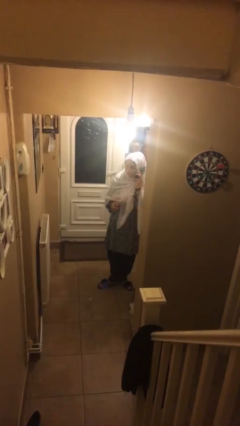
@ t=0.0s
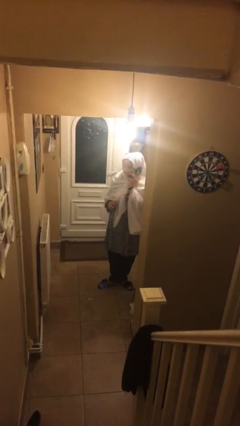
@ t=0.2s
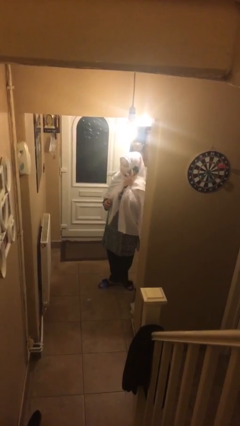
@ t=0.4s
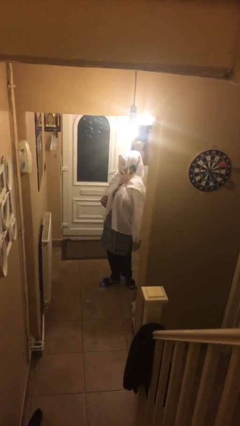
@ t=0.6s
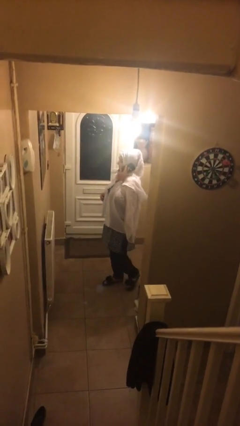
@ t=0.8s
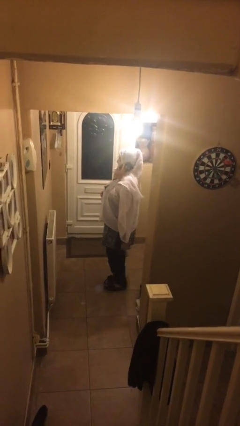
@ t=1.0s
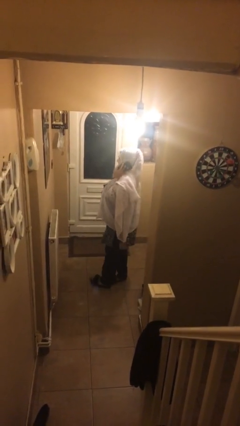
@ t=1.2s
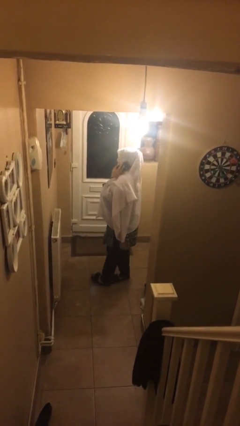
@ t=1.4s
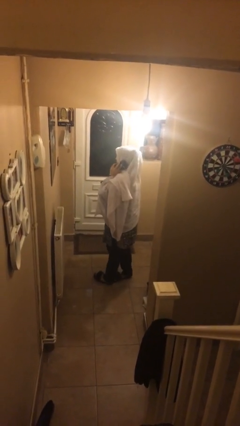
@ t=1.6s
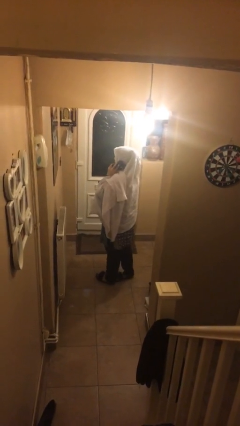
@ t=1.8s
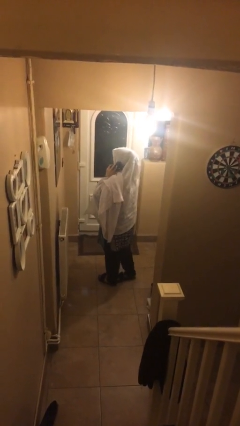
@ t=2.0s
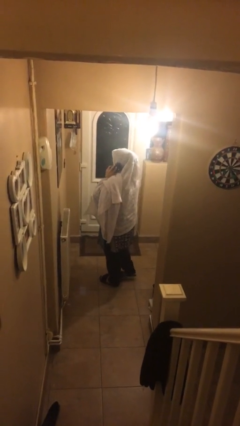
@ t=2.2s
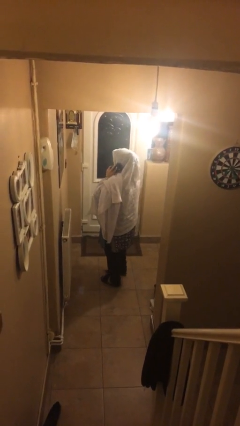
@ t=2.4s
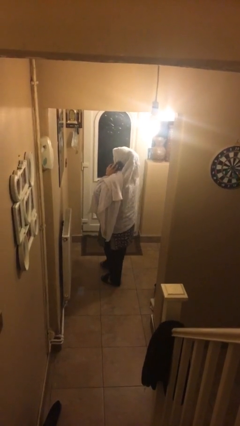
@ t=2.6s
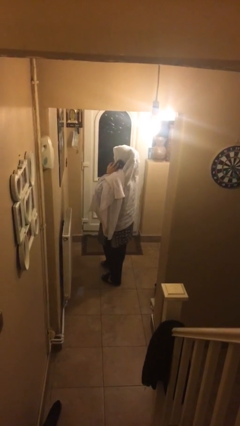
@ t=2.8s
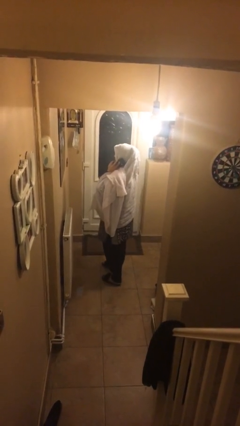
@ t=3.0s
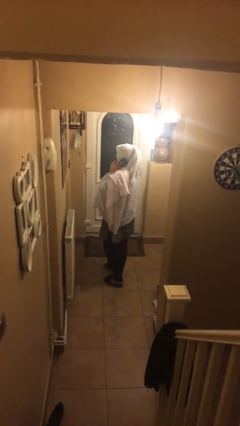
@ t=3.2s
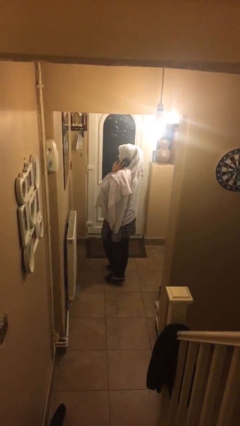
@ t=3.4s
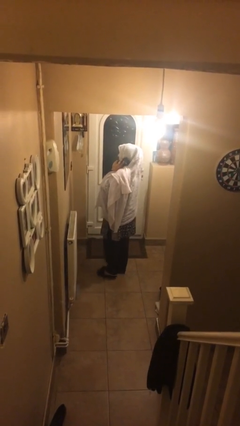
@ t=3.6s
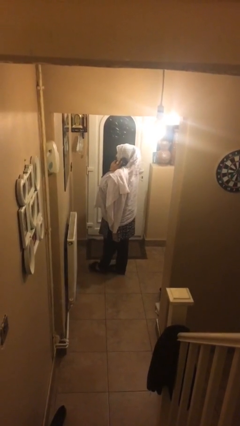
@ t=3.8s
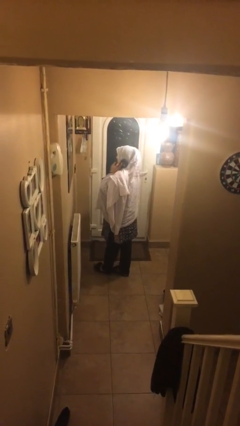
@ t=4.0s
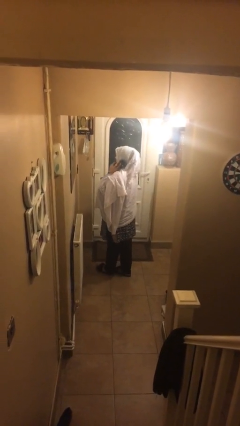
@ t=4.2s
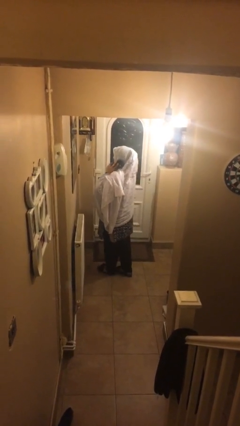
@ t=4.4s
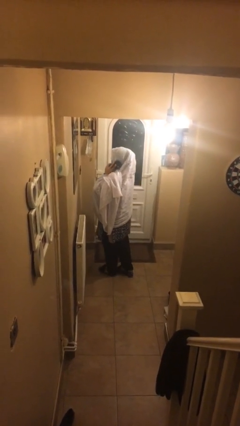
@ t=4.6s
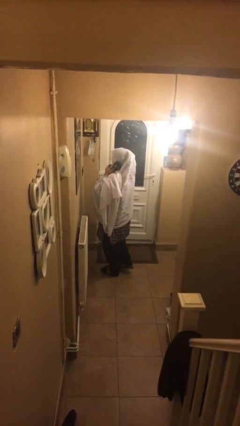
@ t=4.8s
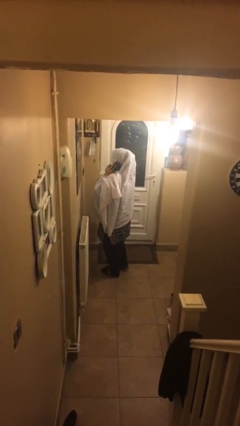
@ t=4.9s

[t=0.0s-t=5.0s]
person talks on phone

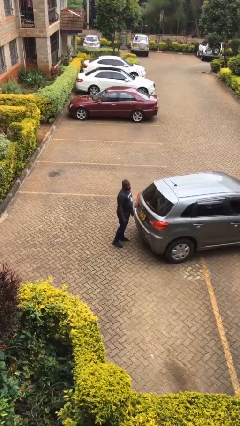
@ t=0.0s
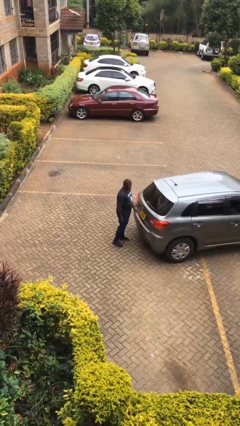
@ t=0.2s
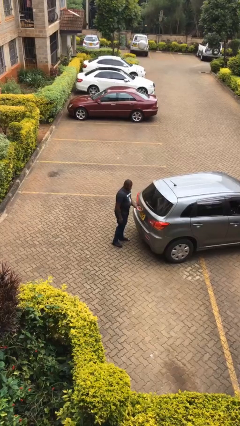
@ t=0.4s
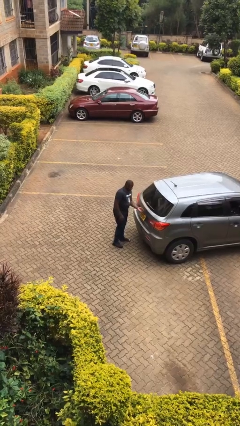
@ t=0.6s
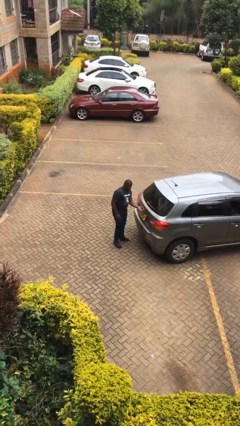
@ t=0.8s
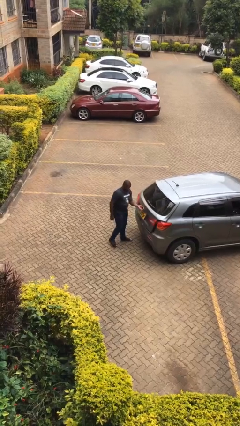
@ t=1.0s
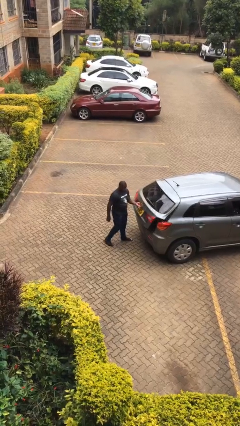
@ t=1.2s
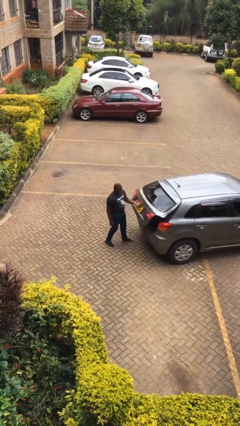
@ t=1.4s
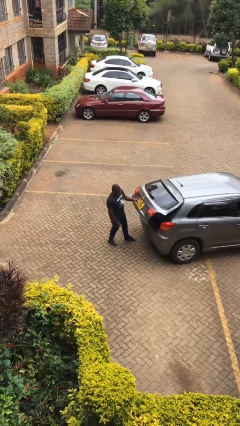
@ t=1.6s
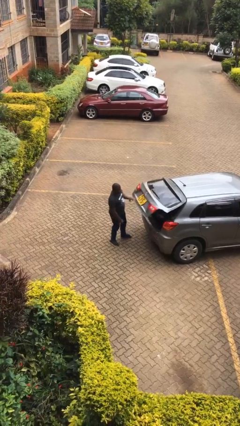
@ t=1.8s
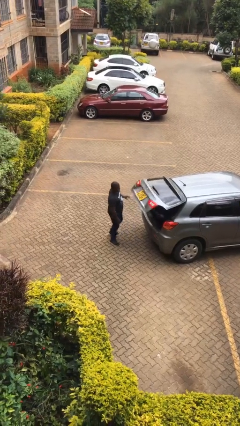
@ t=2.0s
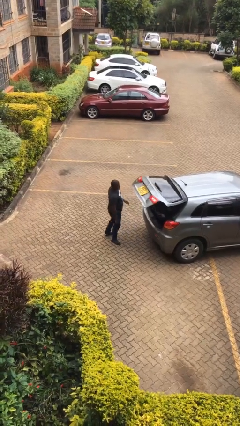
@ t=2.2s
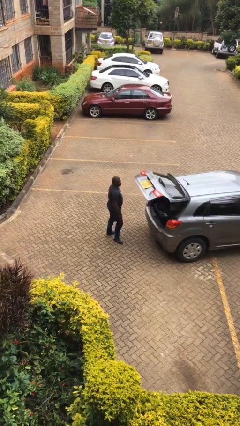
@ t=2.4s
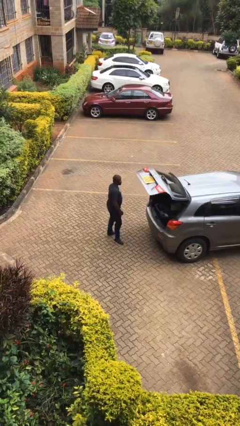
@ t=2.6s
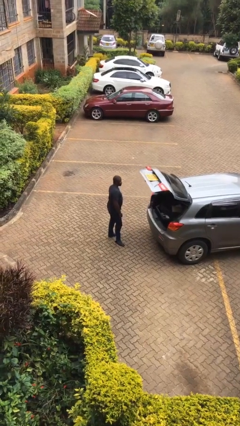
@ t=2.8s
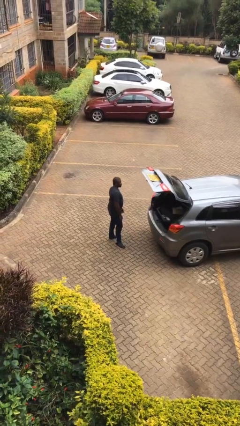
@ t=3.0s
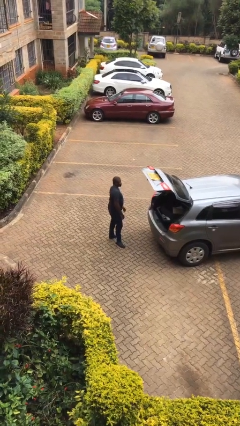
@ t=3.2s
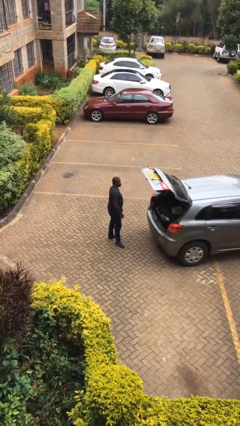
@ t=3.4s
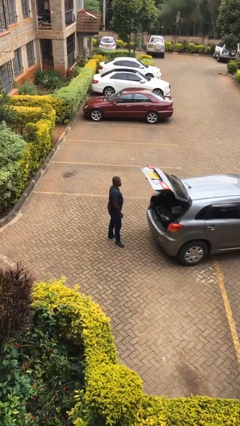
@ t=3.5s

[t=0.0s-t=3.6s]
person opens car trunk

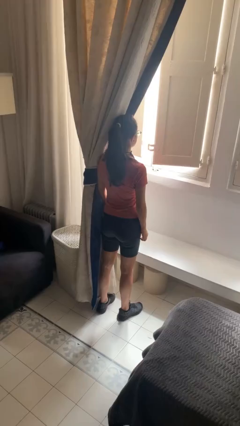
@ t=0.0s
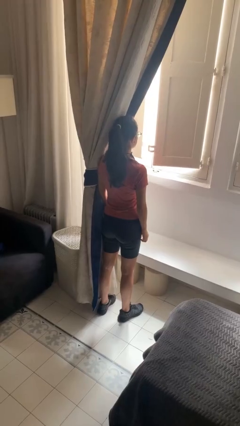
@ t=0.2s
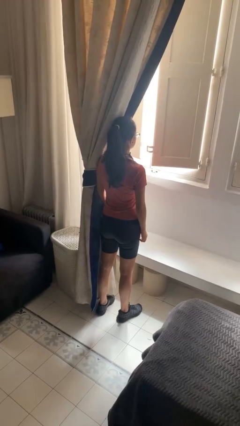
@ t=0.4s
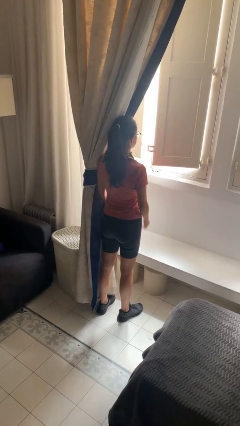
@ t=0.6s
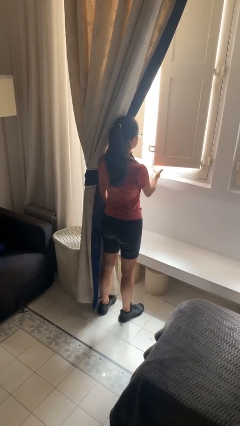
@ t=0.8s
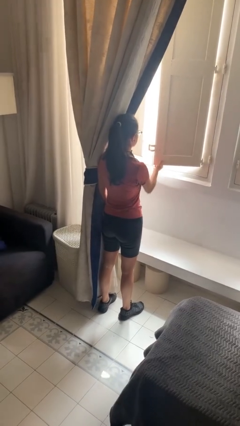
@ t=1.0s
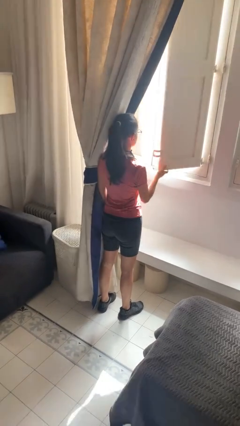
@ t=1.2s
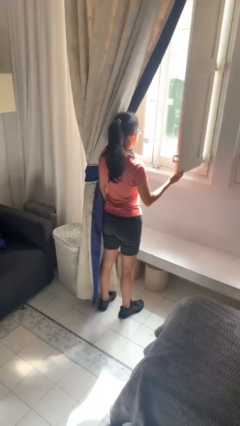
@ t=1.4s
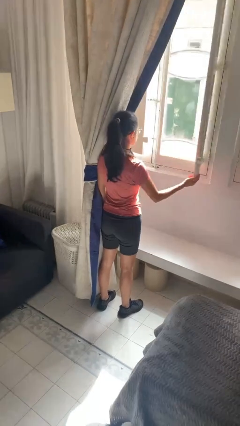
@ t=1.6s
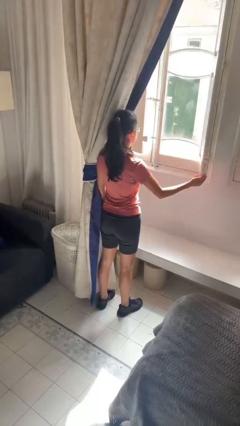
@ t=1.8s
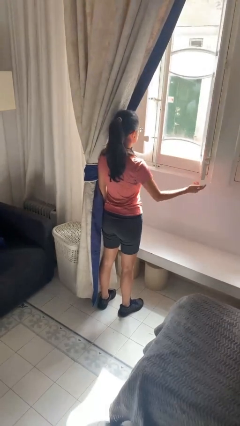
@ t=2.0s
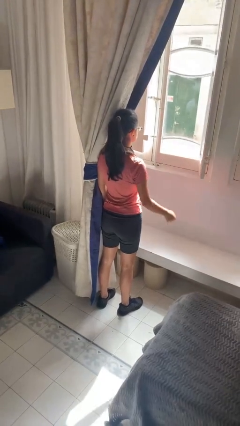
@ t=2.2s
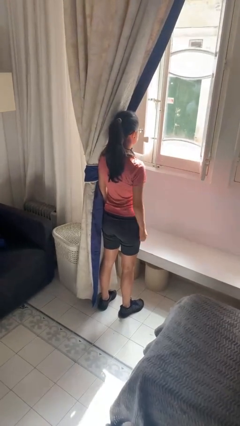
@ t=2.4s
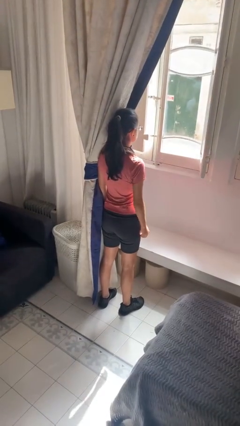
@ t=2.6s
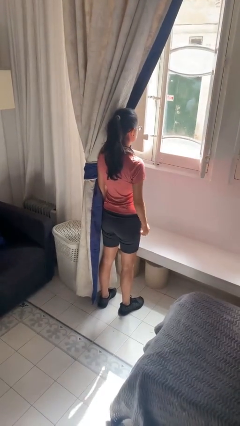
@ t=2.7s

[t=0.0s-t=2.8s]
person opens home window

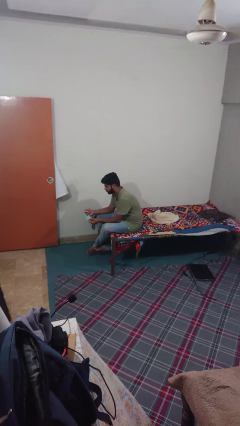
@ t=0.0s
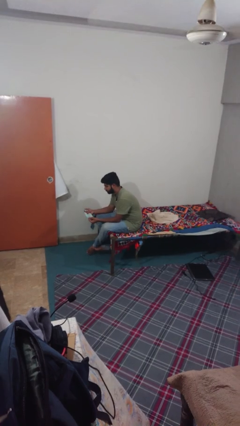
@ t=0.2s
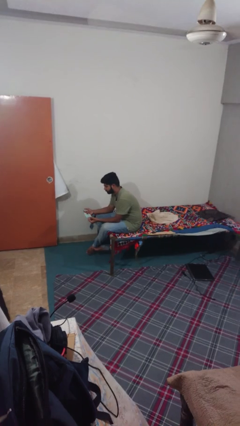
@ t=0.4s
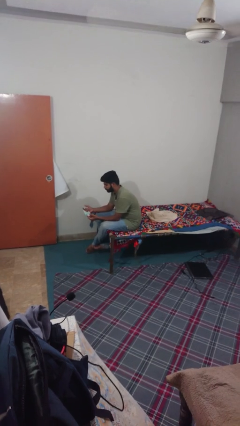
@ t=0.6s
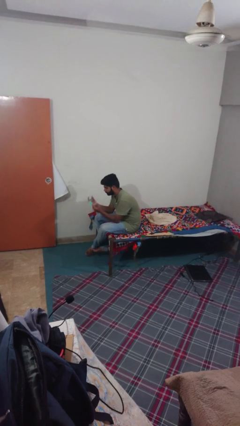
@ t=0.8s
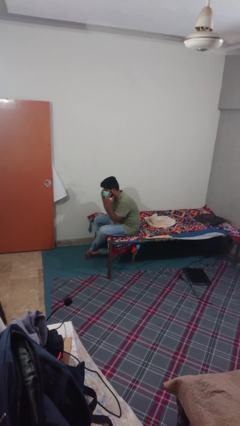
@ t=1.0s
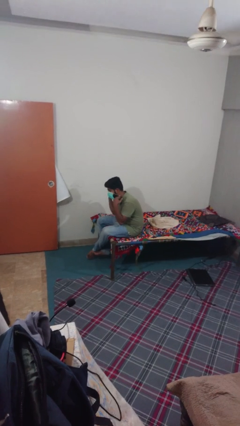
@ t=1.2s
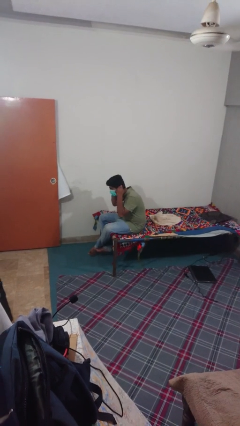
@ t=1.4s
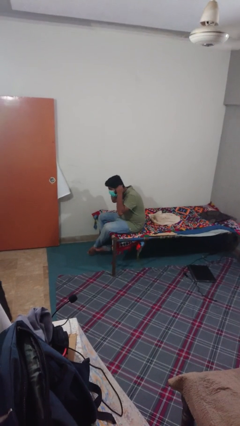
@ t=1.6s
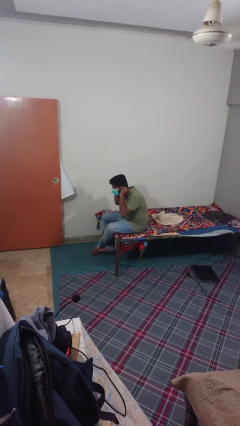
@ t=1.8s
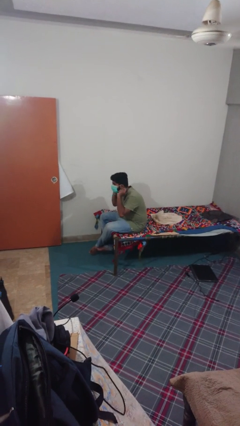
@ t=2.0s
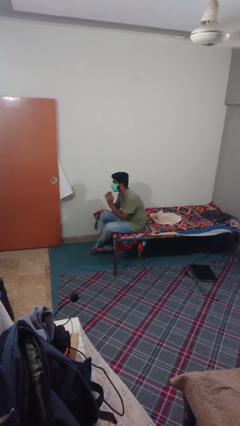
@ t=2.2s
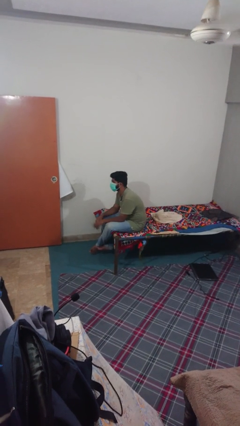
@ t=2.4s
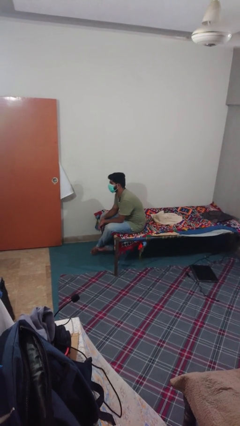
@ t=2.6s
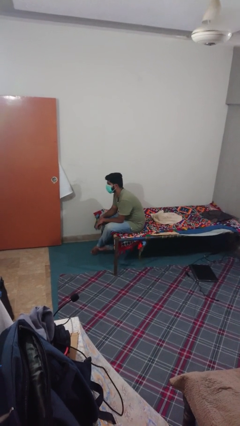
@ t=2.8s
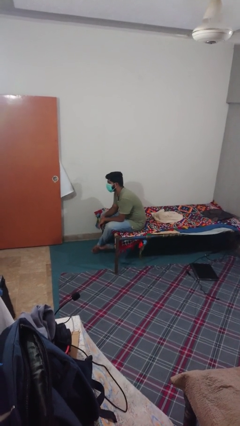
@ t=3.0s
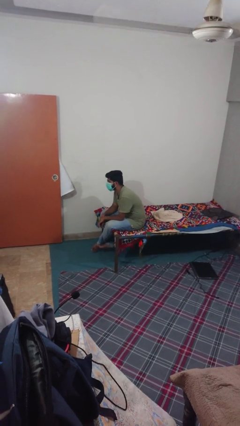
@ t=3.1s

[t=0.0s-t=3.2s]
person puts on facemask

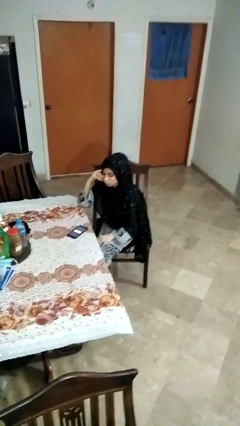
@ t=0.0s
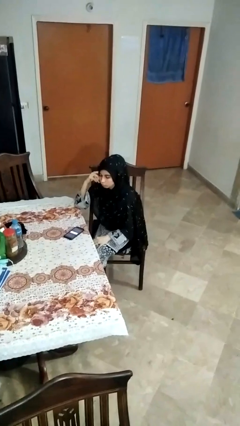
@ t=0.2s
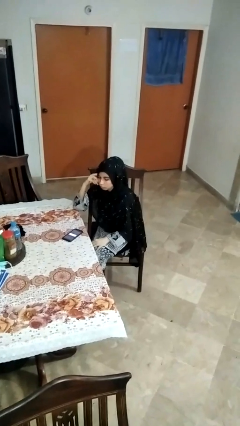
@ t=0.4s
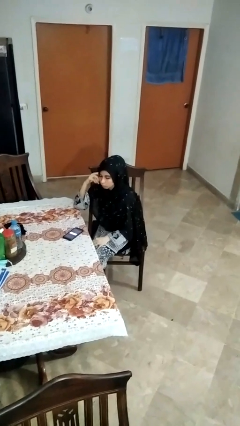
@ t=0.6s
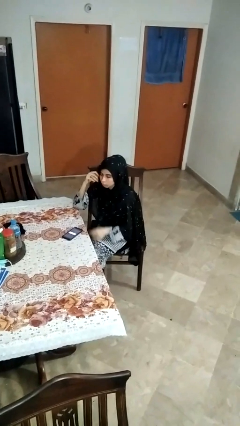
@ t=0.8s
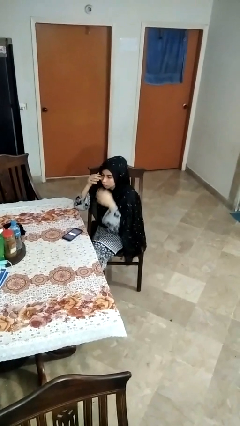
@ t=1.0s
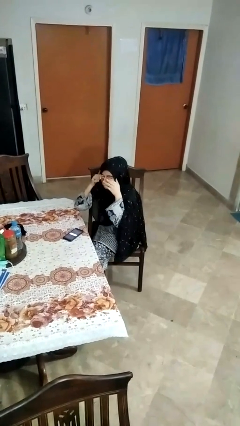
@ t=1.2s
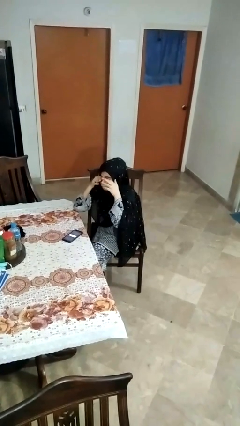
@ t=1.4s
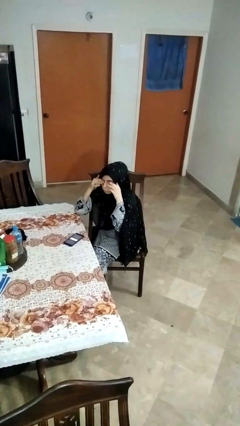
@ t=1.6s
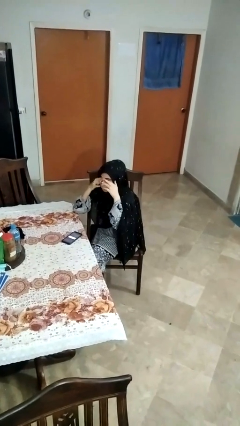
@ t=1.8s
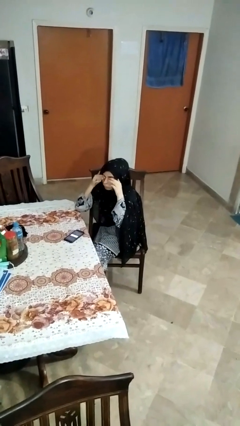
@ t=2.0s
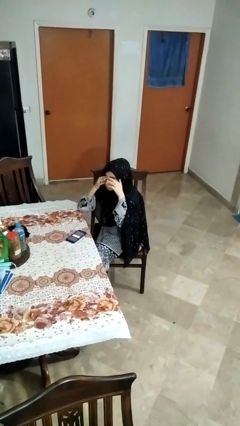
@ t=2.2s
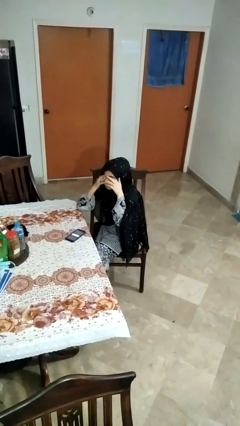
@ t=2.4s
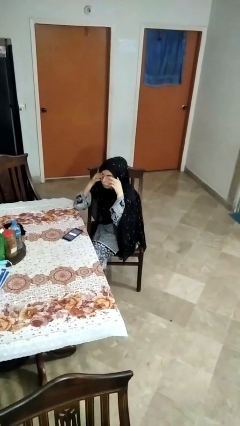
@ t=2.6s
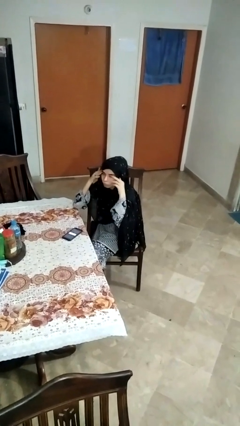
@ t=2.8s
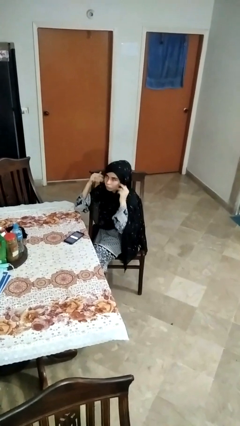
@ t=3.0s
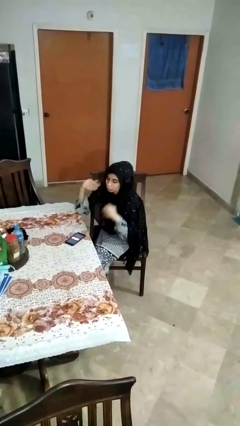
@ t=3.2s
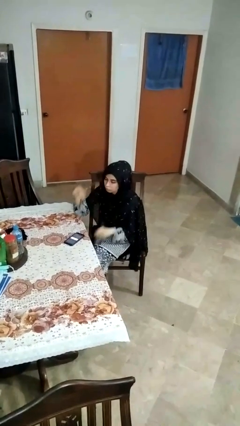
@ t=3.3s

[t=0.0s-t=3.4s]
person rubs eyes
